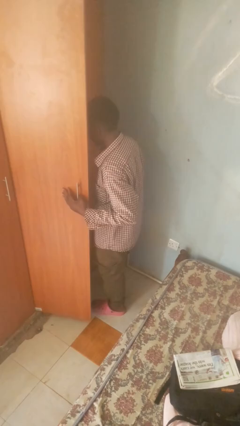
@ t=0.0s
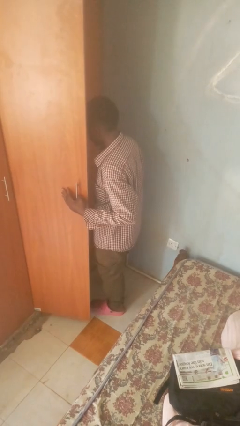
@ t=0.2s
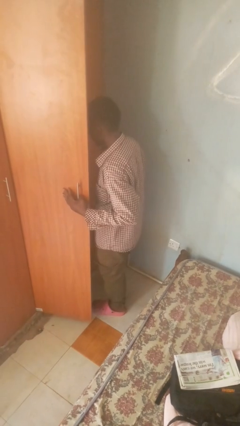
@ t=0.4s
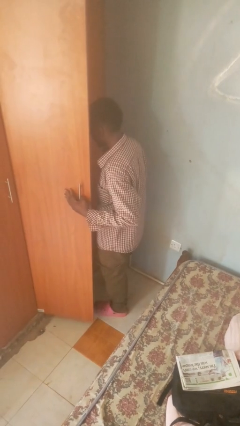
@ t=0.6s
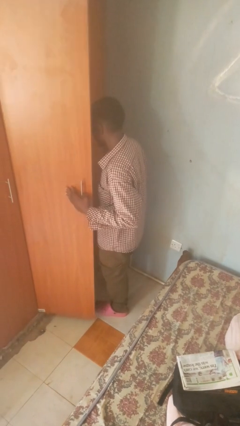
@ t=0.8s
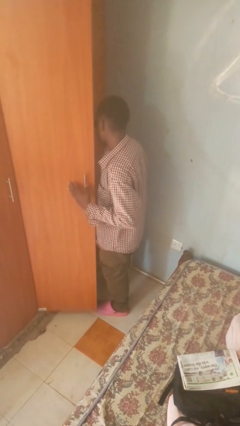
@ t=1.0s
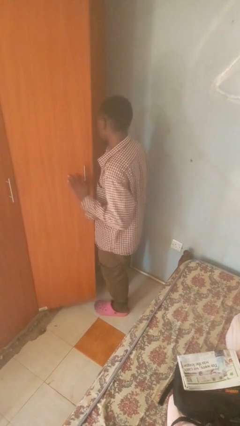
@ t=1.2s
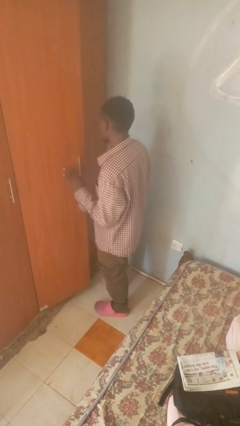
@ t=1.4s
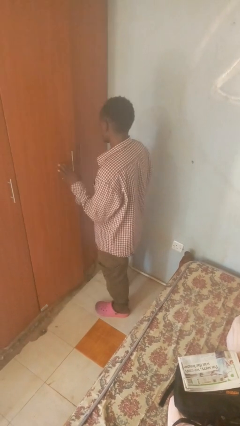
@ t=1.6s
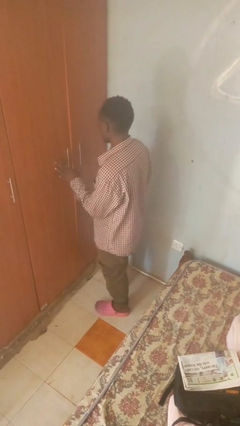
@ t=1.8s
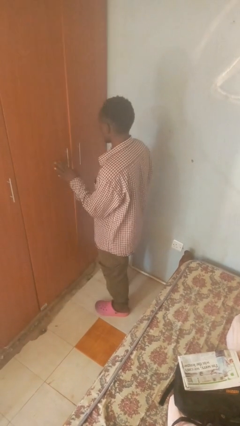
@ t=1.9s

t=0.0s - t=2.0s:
person closes closet door

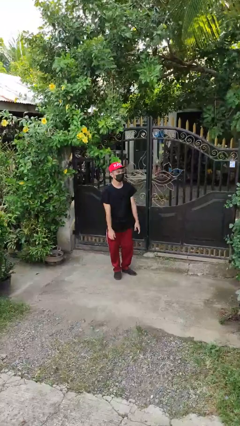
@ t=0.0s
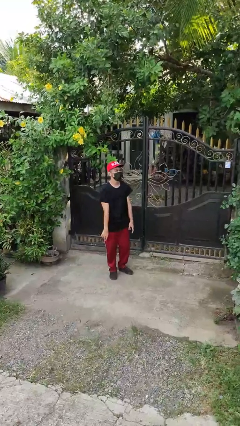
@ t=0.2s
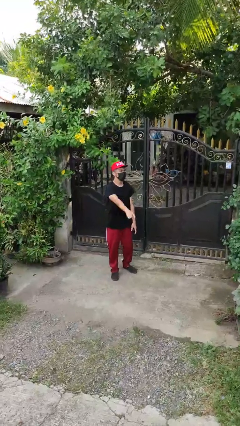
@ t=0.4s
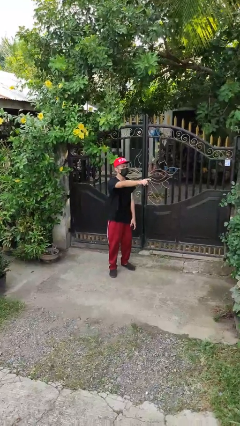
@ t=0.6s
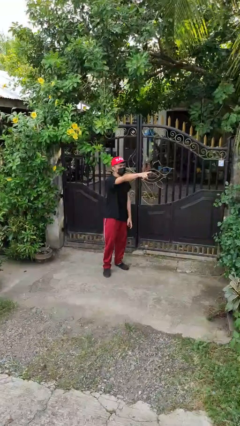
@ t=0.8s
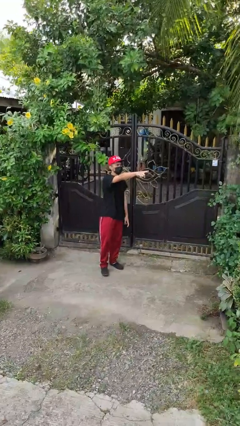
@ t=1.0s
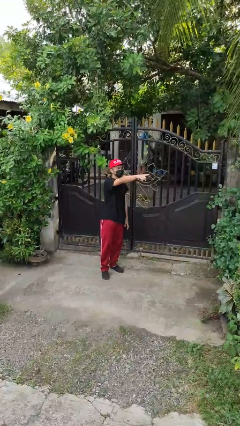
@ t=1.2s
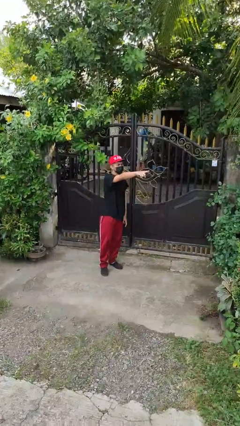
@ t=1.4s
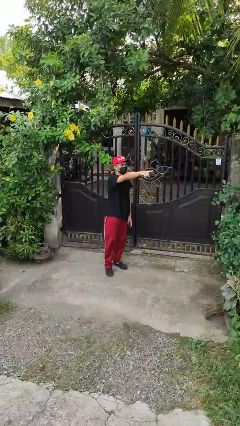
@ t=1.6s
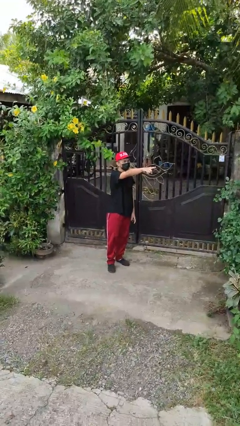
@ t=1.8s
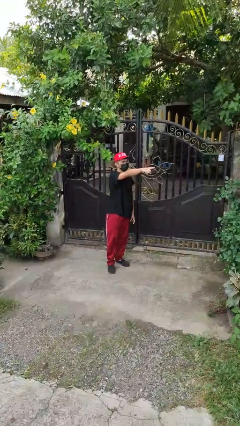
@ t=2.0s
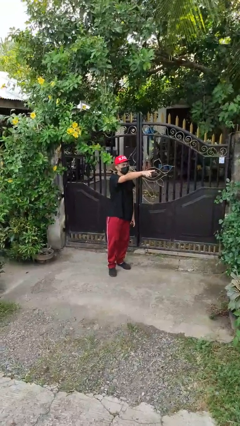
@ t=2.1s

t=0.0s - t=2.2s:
person points at person

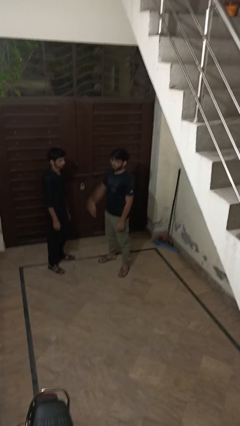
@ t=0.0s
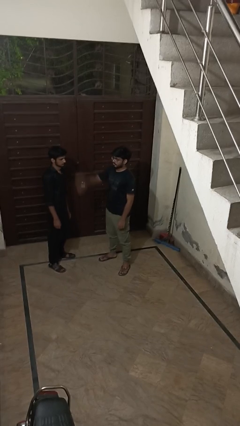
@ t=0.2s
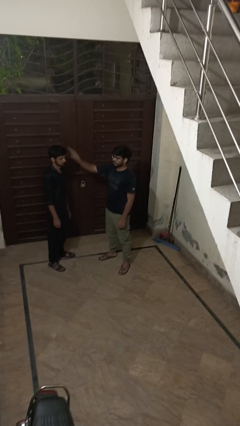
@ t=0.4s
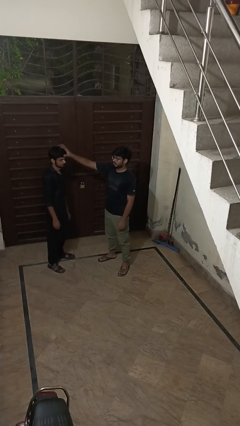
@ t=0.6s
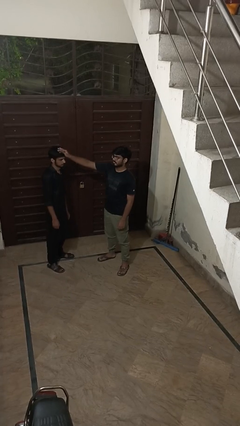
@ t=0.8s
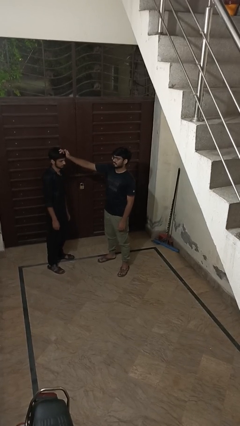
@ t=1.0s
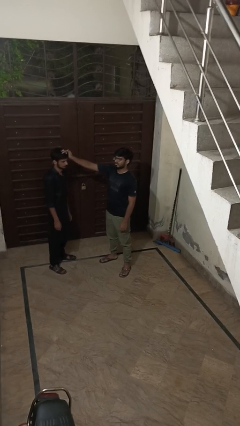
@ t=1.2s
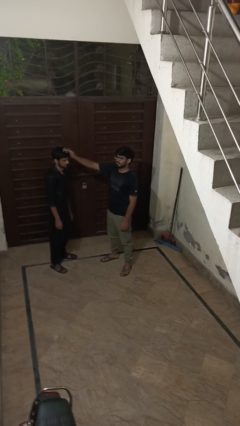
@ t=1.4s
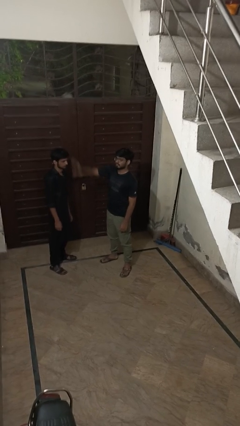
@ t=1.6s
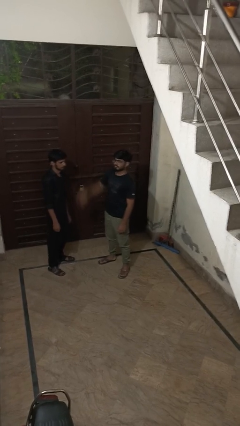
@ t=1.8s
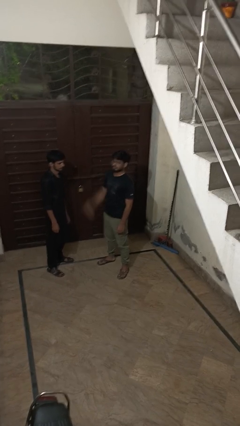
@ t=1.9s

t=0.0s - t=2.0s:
person grabs person by hair

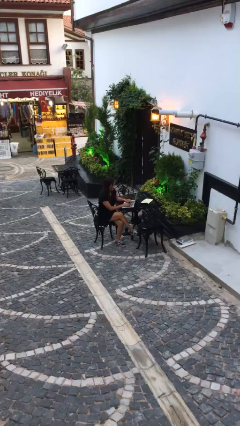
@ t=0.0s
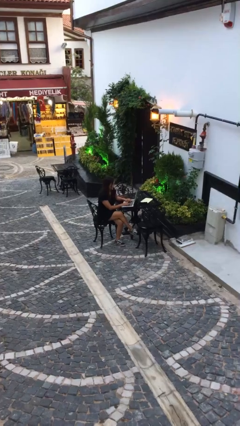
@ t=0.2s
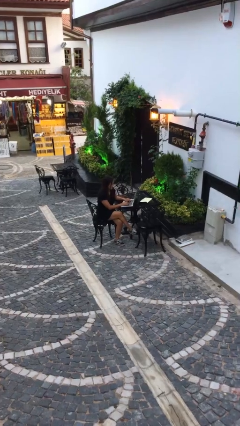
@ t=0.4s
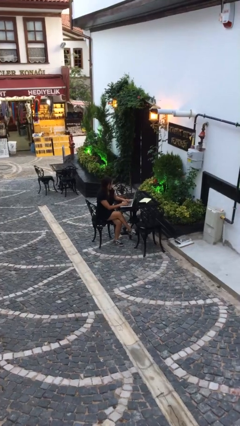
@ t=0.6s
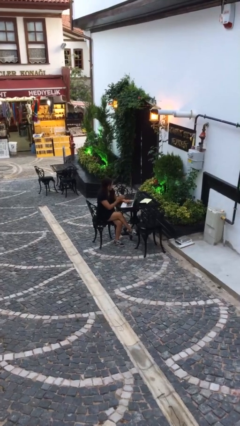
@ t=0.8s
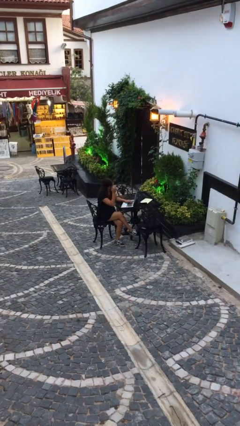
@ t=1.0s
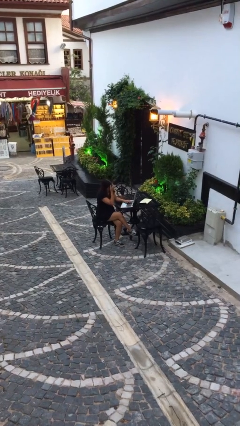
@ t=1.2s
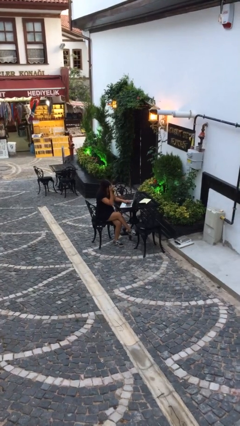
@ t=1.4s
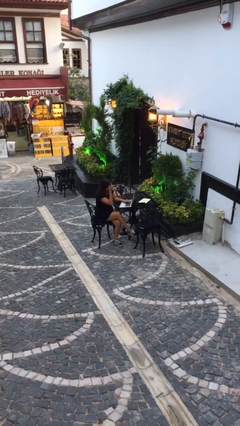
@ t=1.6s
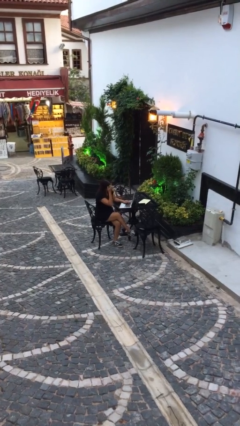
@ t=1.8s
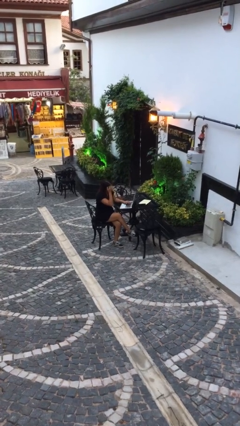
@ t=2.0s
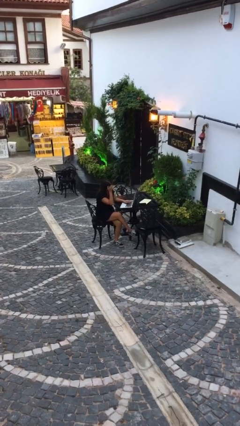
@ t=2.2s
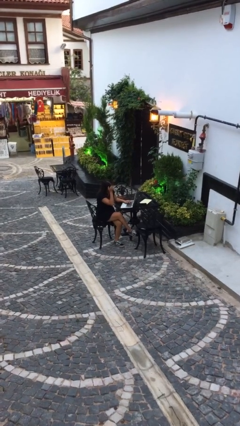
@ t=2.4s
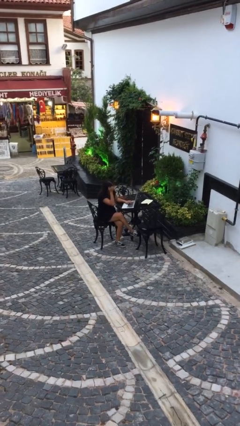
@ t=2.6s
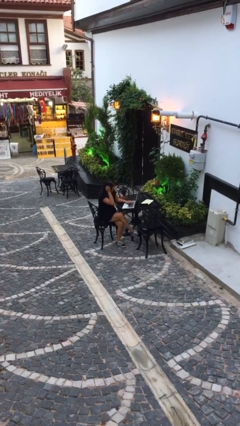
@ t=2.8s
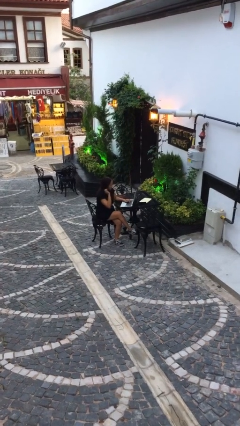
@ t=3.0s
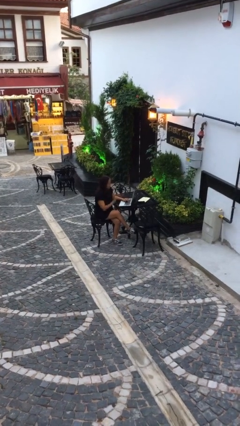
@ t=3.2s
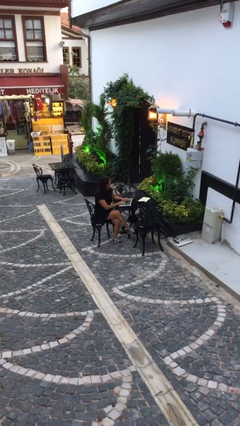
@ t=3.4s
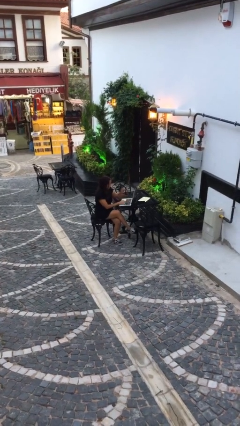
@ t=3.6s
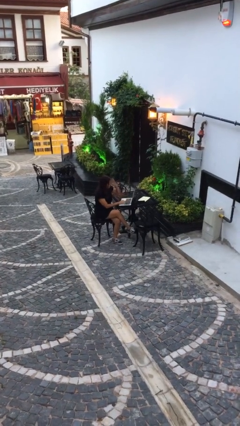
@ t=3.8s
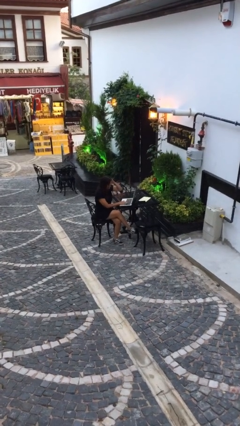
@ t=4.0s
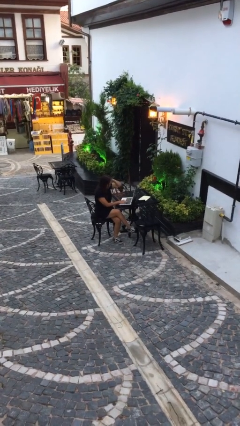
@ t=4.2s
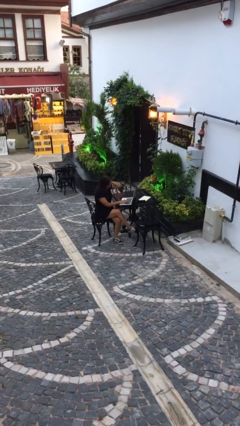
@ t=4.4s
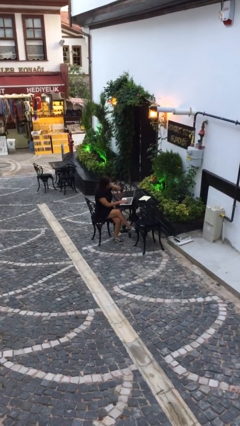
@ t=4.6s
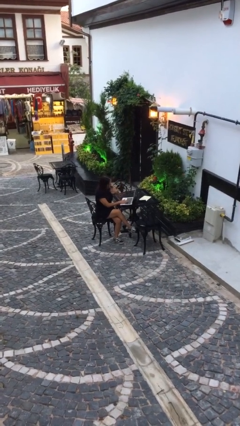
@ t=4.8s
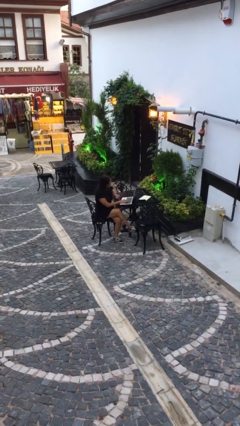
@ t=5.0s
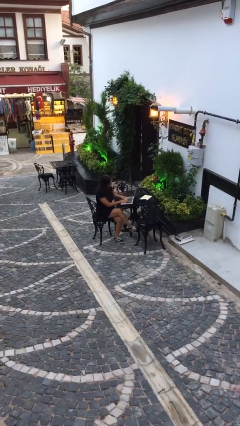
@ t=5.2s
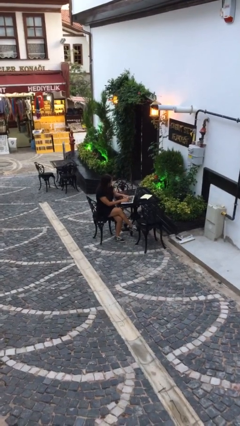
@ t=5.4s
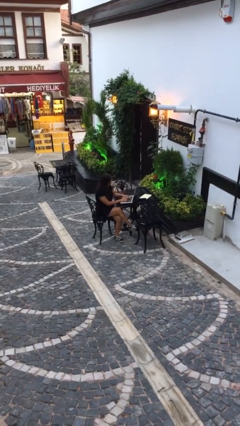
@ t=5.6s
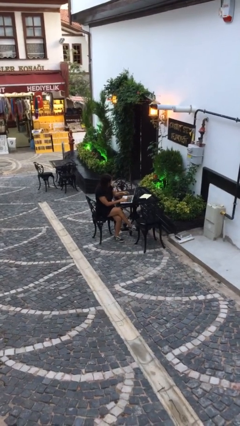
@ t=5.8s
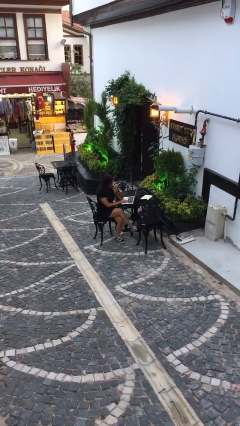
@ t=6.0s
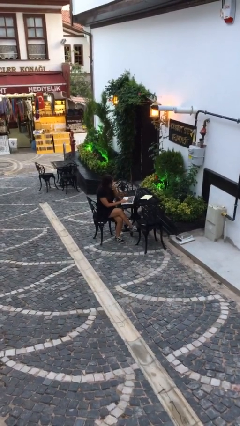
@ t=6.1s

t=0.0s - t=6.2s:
person interacts with laptop

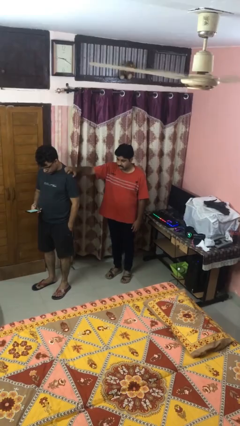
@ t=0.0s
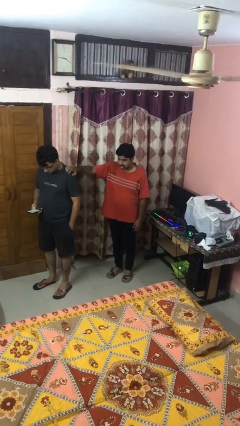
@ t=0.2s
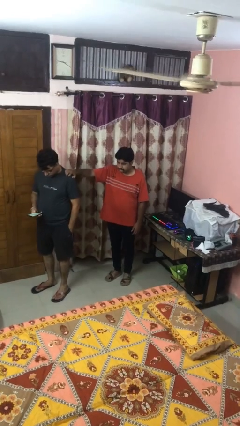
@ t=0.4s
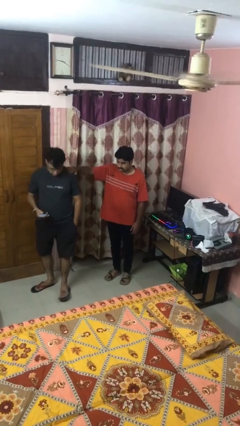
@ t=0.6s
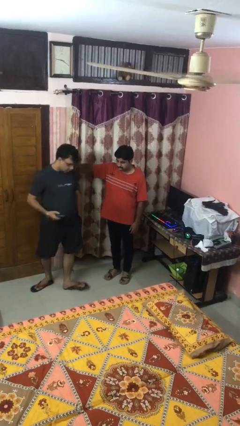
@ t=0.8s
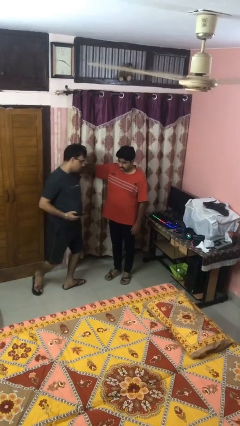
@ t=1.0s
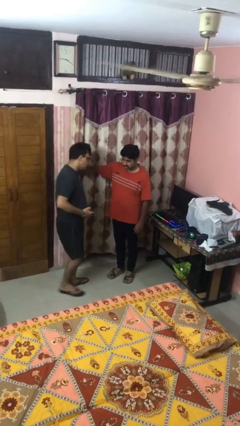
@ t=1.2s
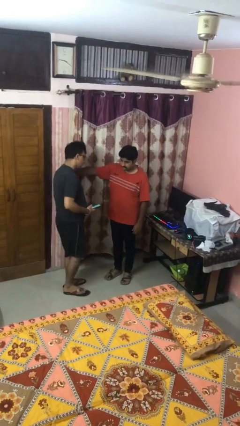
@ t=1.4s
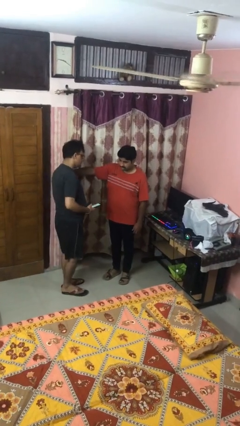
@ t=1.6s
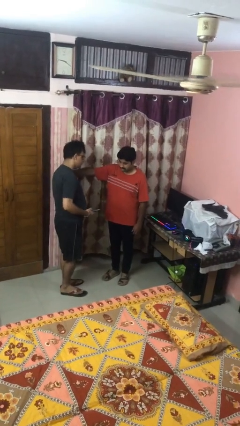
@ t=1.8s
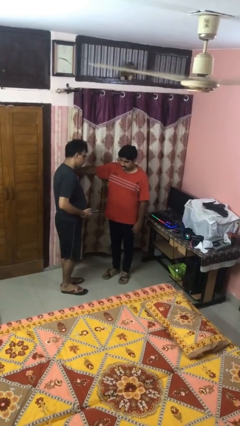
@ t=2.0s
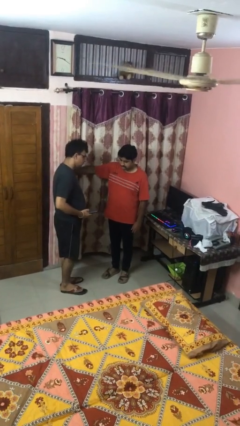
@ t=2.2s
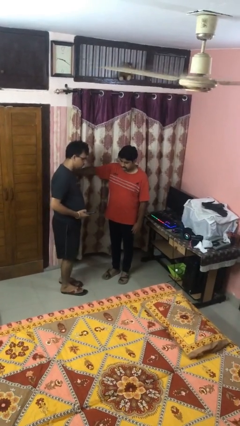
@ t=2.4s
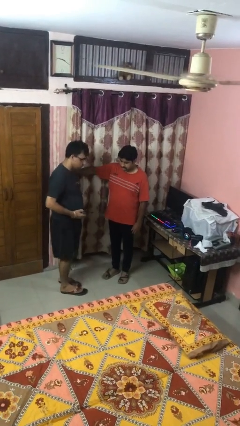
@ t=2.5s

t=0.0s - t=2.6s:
person spins person around

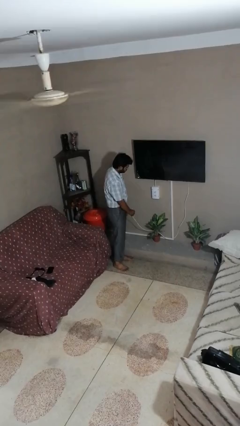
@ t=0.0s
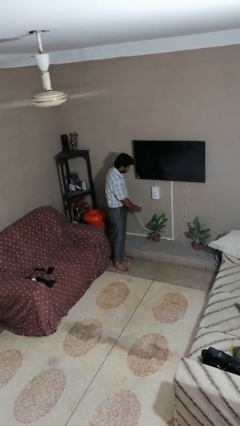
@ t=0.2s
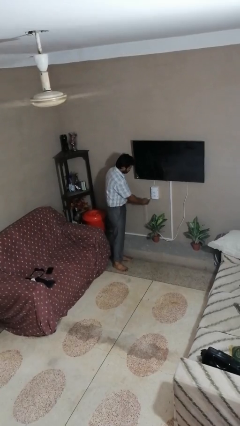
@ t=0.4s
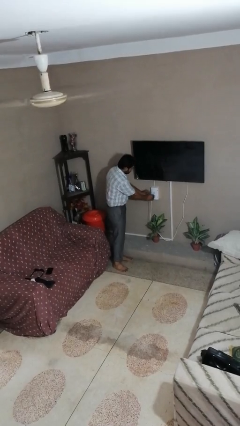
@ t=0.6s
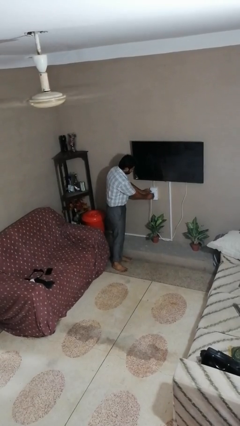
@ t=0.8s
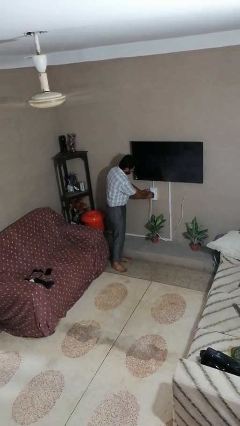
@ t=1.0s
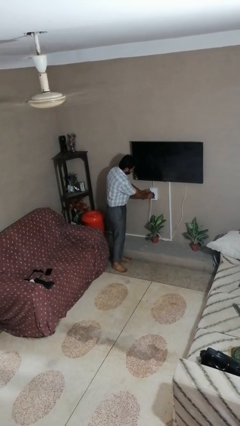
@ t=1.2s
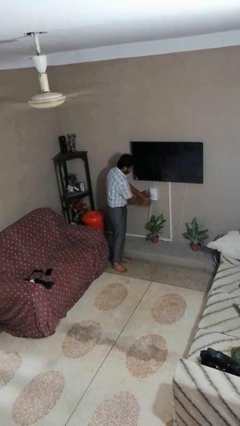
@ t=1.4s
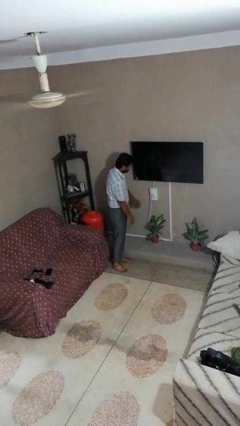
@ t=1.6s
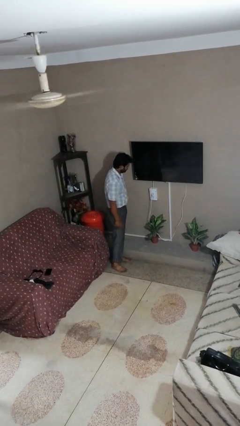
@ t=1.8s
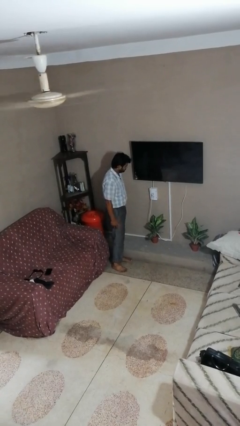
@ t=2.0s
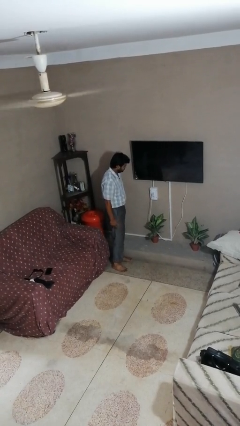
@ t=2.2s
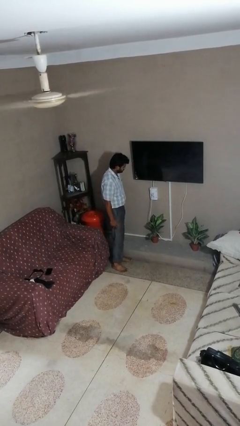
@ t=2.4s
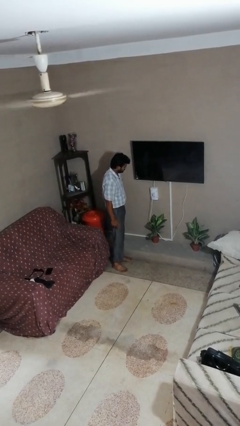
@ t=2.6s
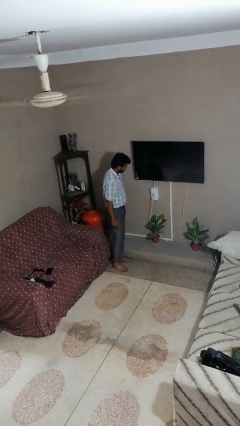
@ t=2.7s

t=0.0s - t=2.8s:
person plugs into electrical socket
